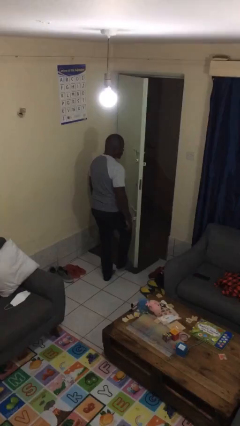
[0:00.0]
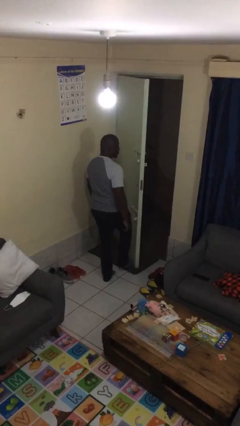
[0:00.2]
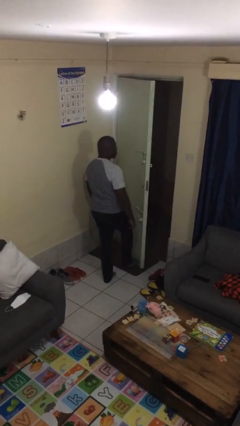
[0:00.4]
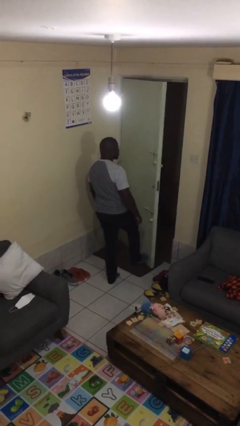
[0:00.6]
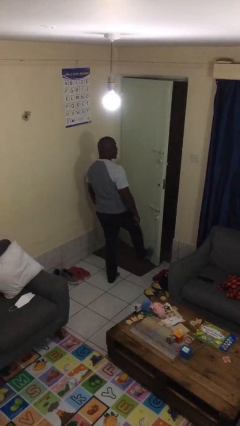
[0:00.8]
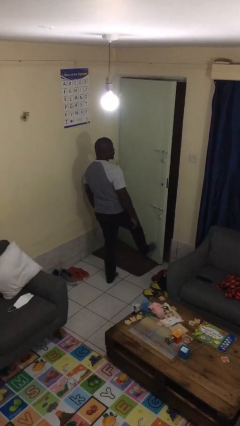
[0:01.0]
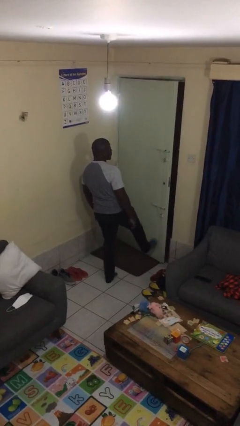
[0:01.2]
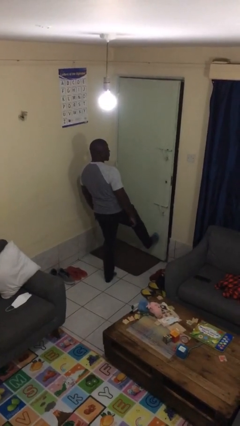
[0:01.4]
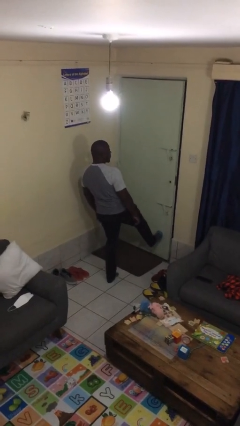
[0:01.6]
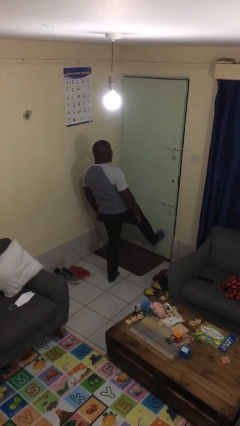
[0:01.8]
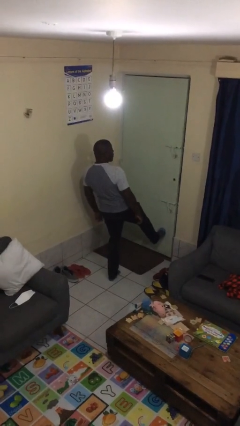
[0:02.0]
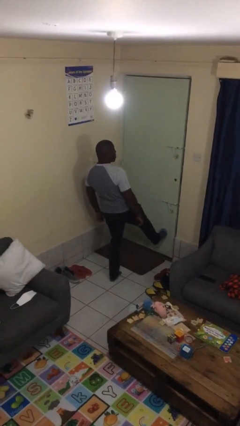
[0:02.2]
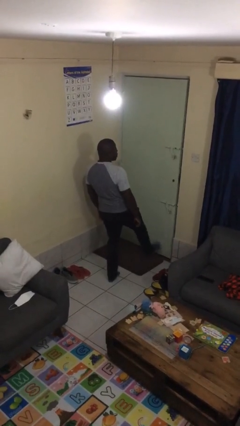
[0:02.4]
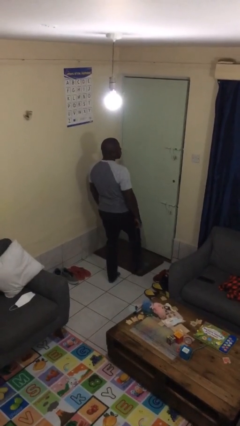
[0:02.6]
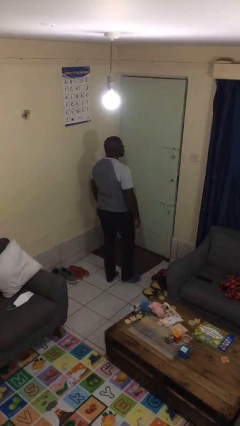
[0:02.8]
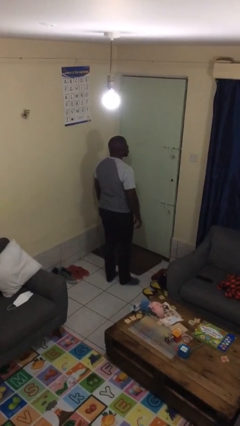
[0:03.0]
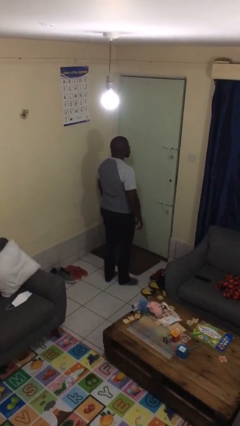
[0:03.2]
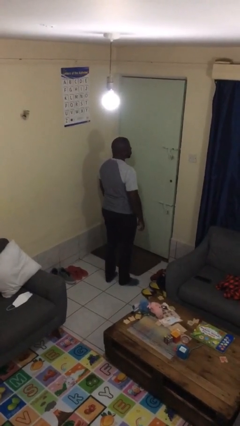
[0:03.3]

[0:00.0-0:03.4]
person closes door with foot

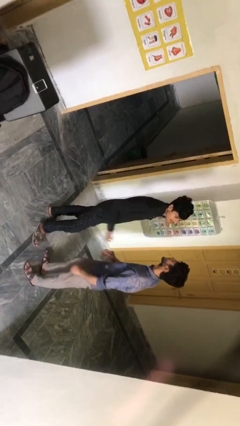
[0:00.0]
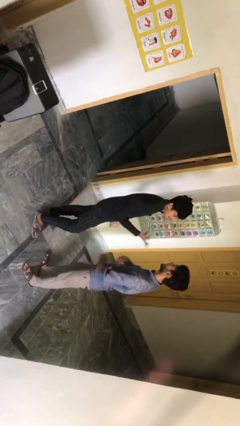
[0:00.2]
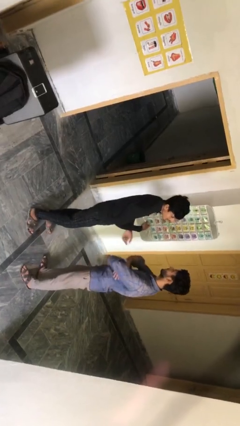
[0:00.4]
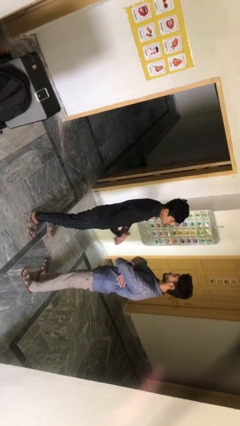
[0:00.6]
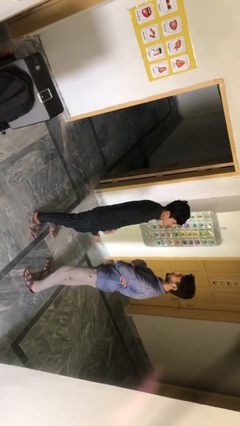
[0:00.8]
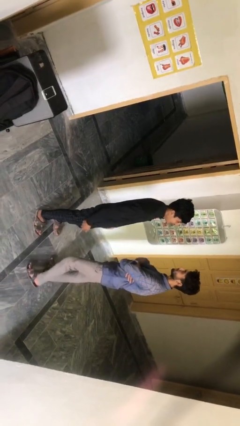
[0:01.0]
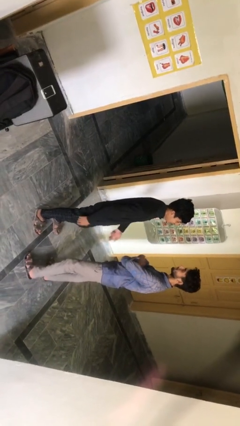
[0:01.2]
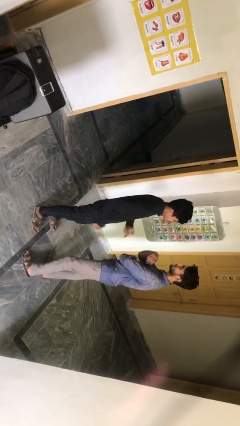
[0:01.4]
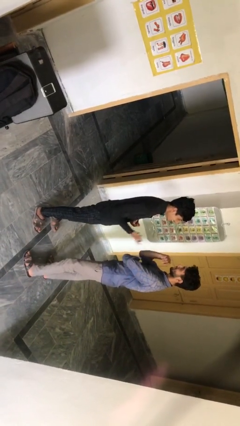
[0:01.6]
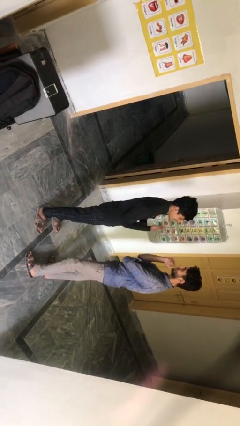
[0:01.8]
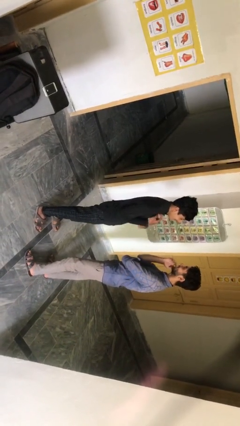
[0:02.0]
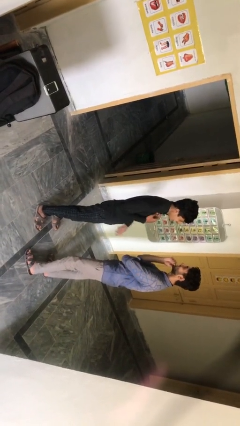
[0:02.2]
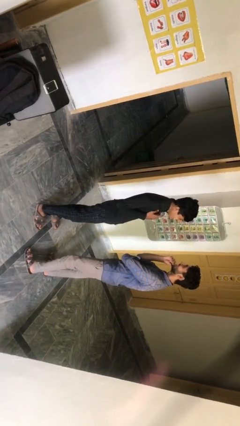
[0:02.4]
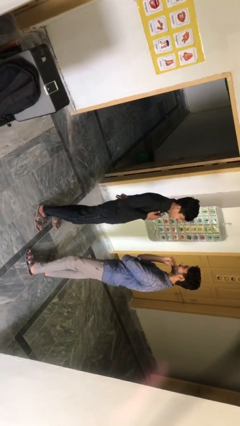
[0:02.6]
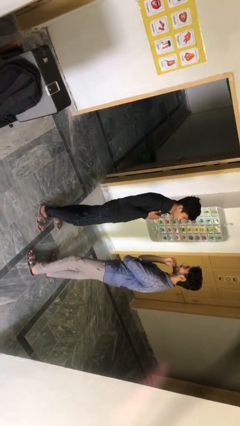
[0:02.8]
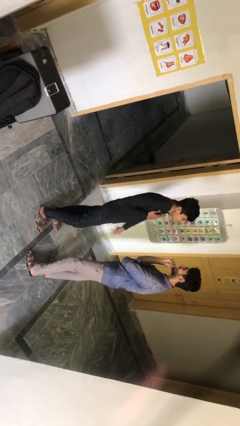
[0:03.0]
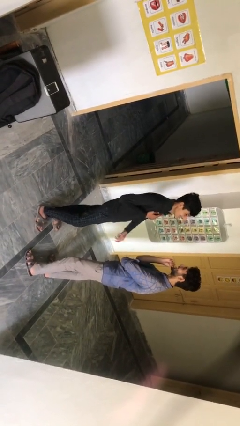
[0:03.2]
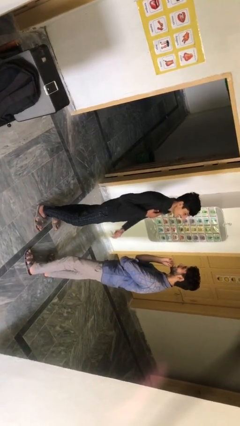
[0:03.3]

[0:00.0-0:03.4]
person talks to person

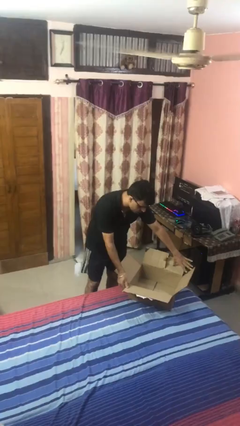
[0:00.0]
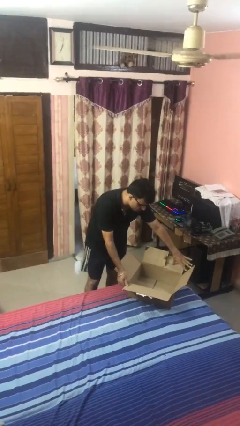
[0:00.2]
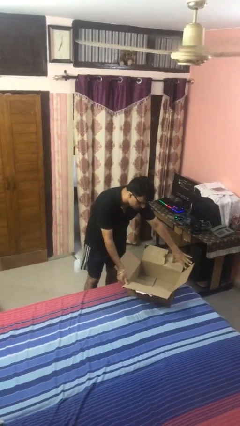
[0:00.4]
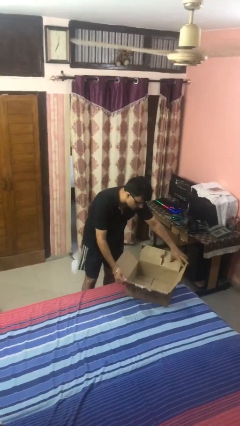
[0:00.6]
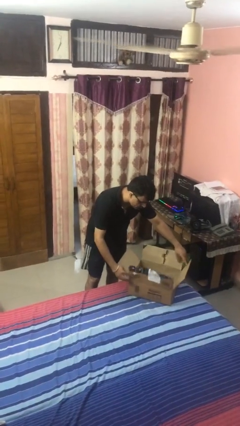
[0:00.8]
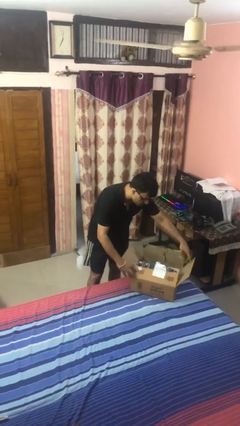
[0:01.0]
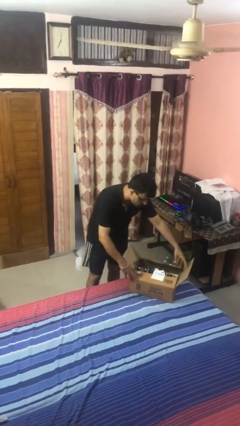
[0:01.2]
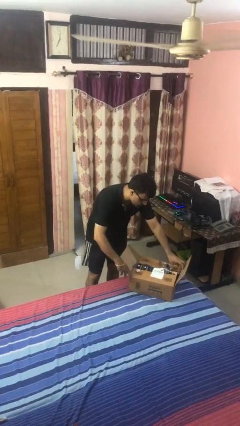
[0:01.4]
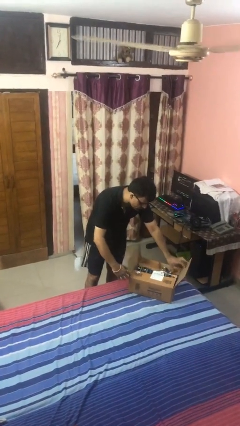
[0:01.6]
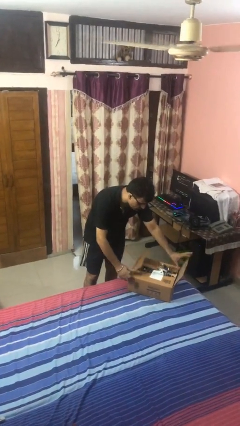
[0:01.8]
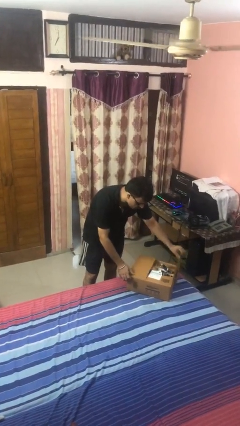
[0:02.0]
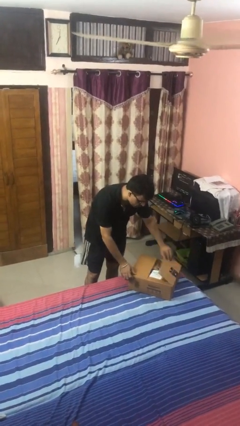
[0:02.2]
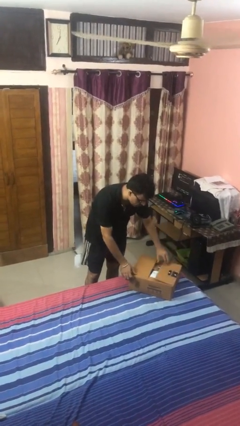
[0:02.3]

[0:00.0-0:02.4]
person closes box

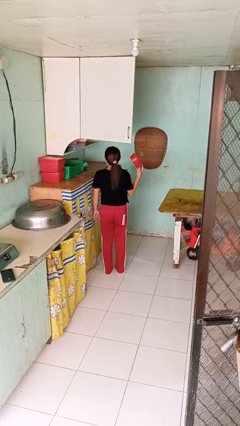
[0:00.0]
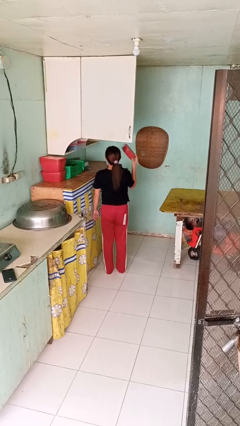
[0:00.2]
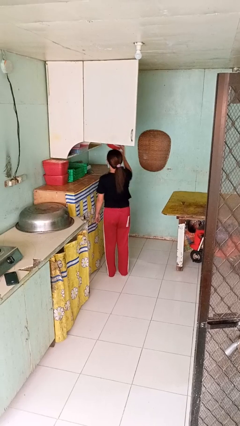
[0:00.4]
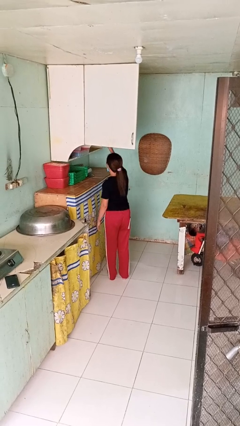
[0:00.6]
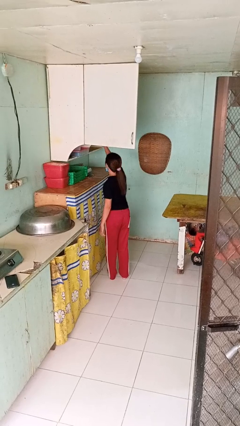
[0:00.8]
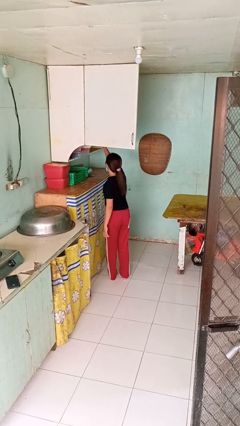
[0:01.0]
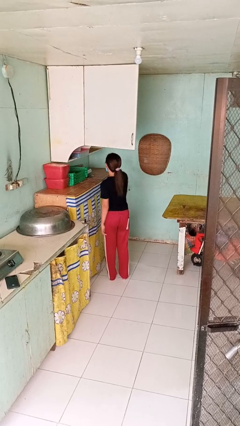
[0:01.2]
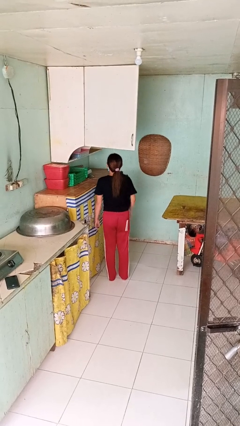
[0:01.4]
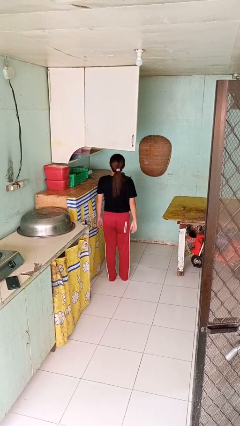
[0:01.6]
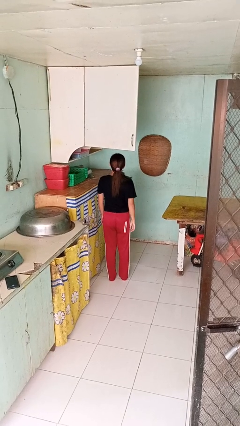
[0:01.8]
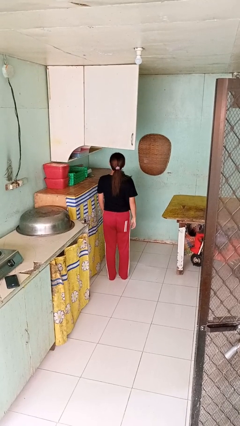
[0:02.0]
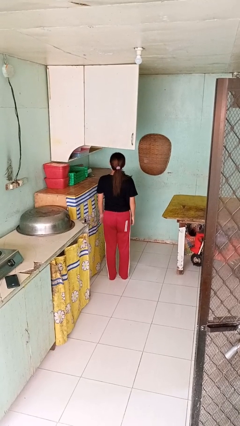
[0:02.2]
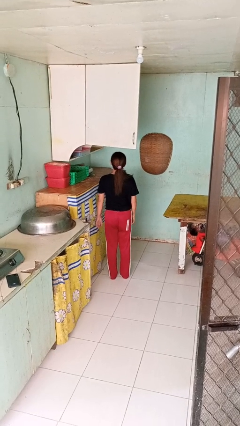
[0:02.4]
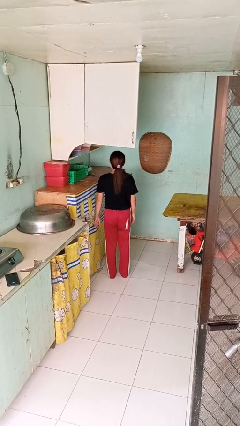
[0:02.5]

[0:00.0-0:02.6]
person puts object in cabinet

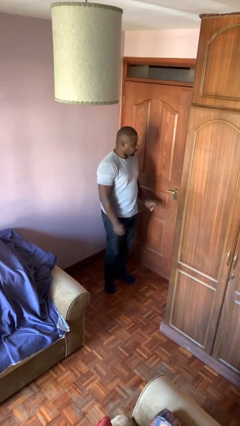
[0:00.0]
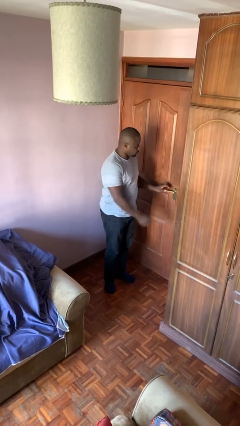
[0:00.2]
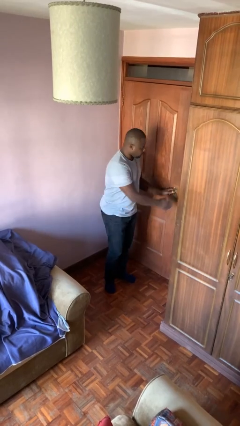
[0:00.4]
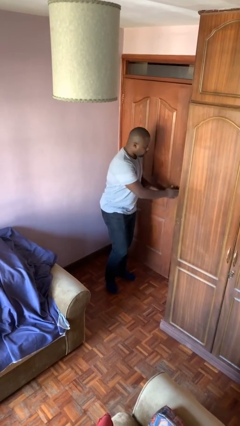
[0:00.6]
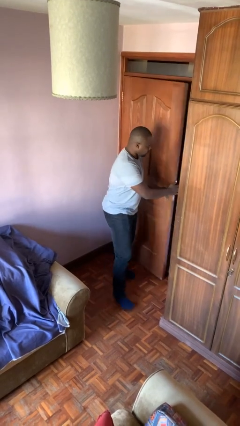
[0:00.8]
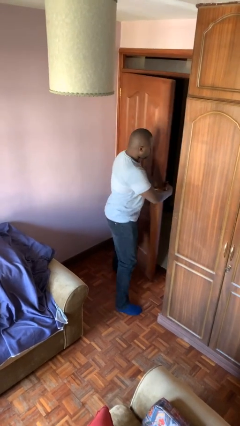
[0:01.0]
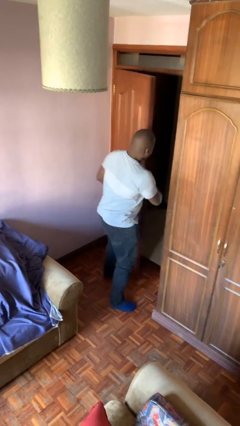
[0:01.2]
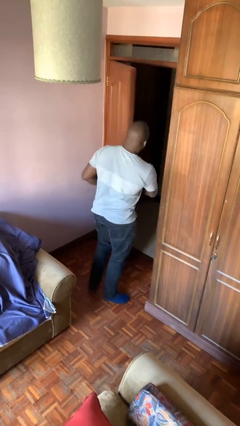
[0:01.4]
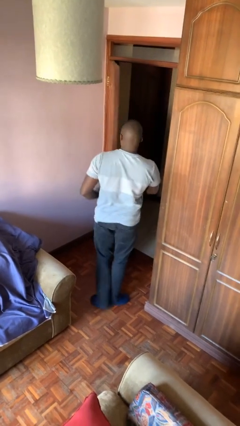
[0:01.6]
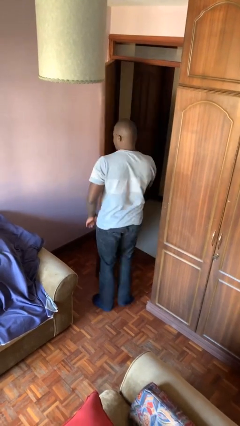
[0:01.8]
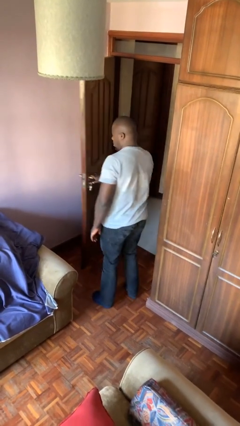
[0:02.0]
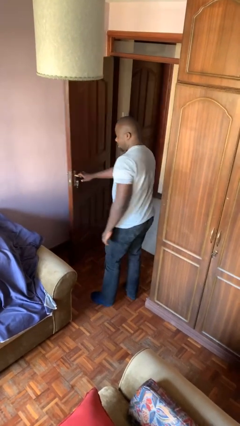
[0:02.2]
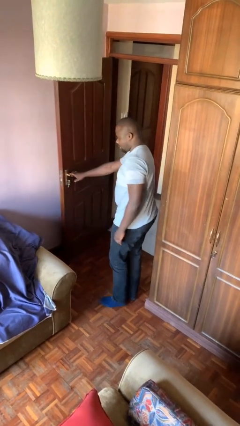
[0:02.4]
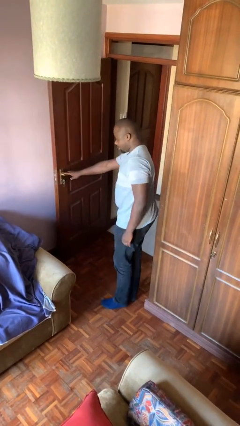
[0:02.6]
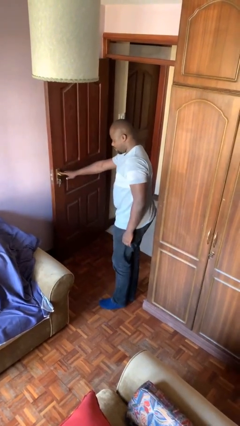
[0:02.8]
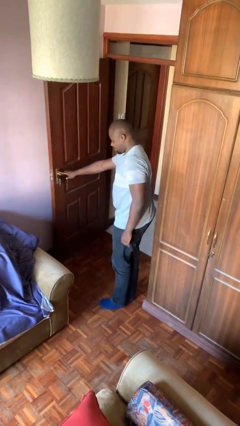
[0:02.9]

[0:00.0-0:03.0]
person opens facility door

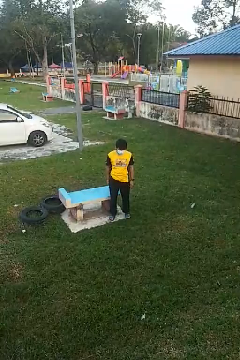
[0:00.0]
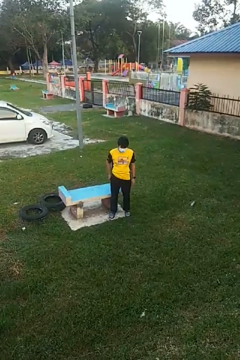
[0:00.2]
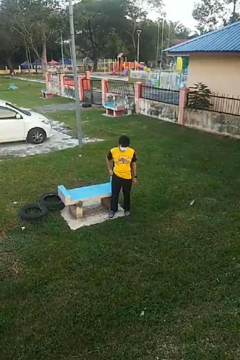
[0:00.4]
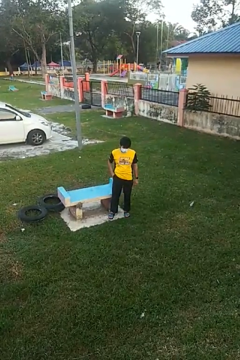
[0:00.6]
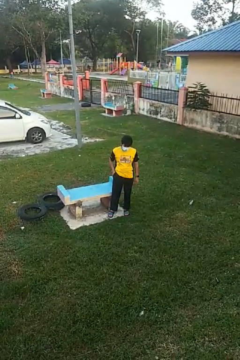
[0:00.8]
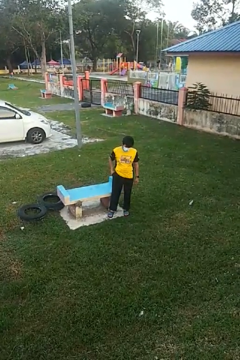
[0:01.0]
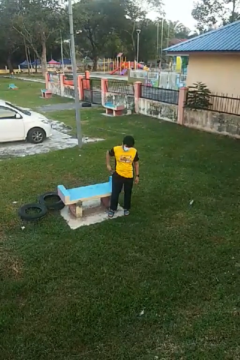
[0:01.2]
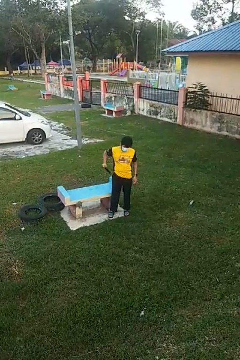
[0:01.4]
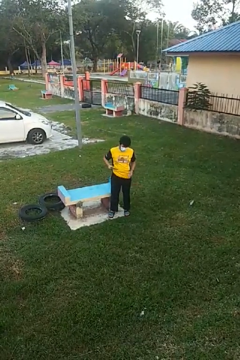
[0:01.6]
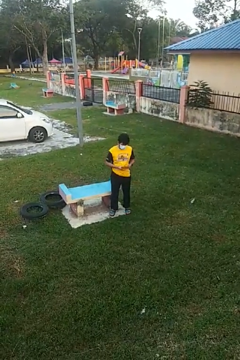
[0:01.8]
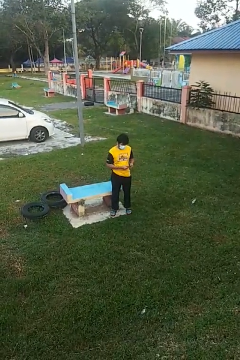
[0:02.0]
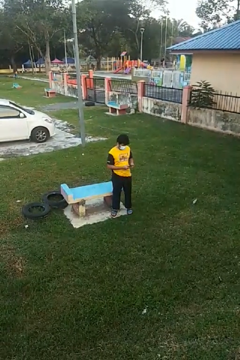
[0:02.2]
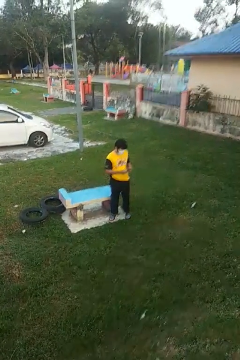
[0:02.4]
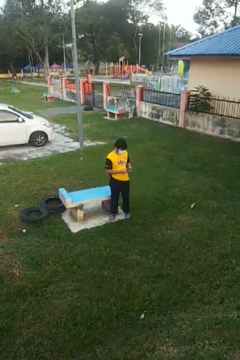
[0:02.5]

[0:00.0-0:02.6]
person takes phone from pocket

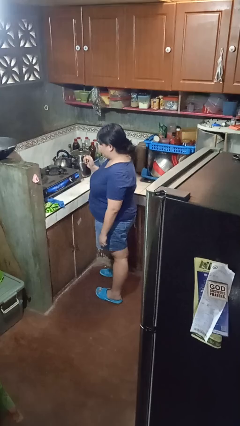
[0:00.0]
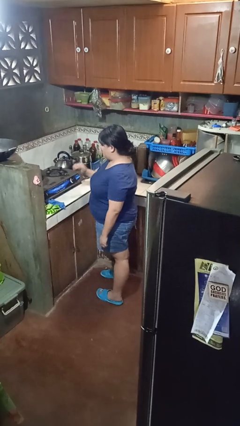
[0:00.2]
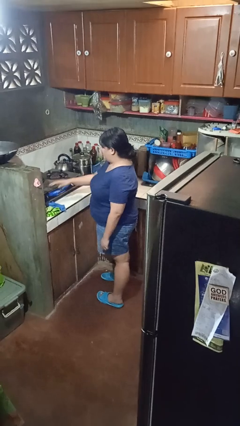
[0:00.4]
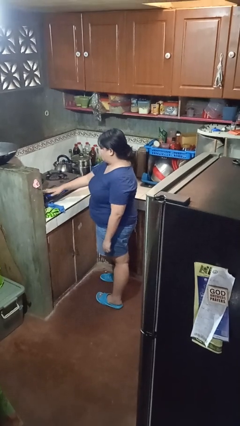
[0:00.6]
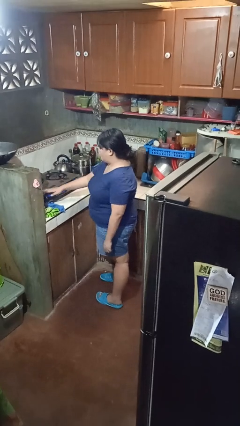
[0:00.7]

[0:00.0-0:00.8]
person burns hand
